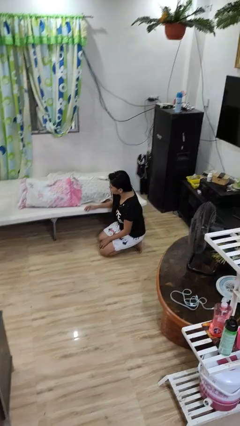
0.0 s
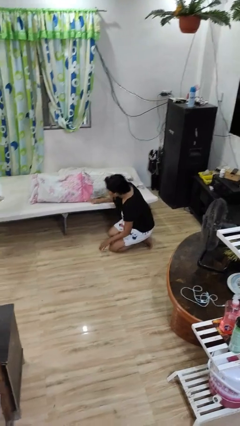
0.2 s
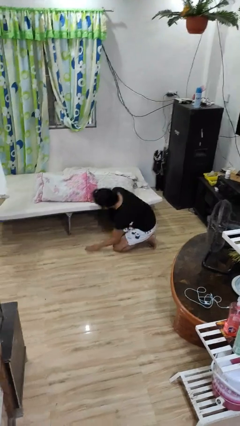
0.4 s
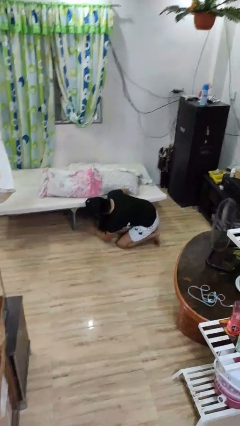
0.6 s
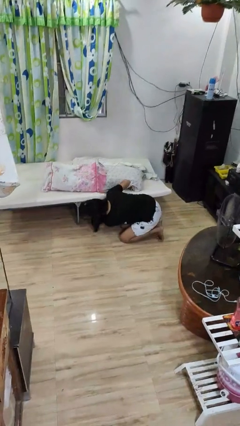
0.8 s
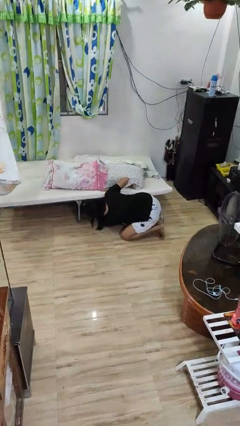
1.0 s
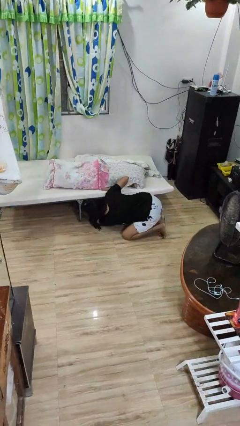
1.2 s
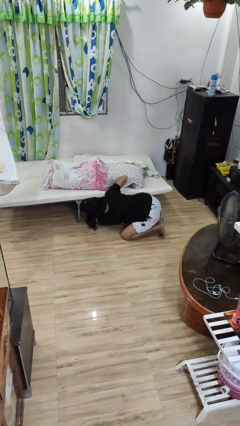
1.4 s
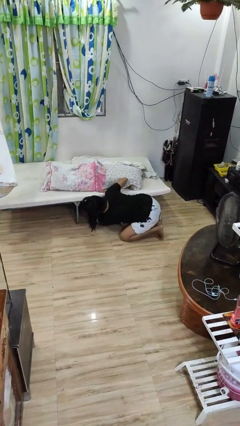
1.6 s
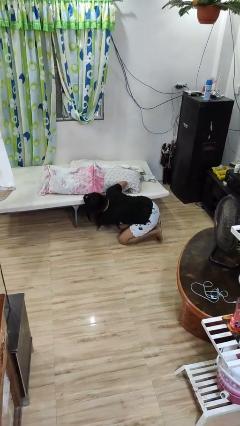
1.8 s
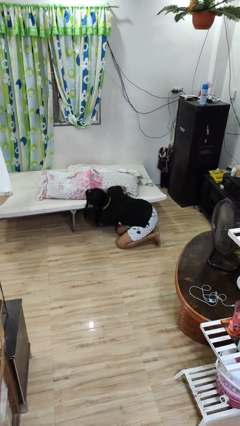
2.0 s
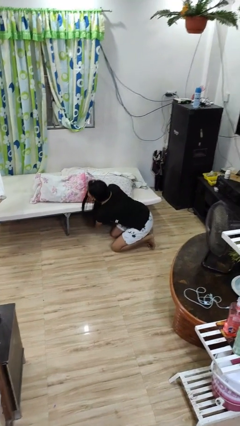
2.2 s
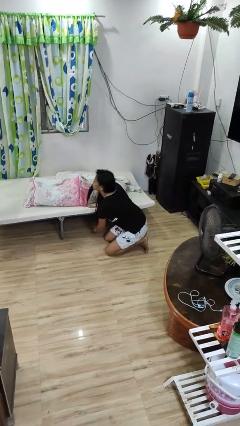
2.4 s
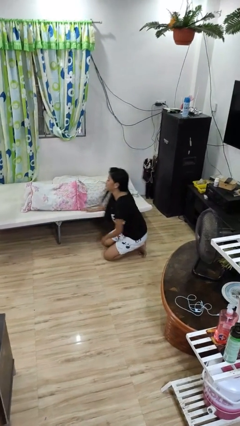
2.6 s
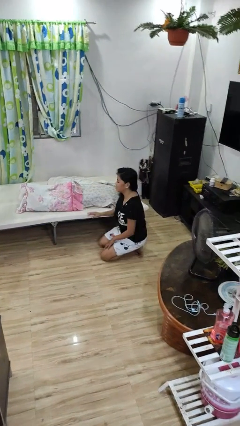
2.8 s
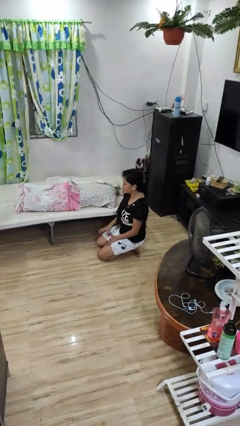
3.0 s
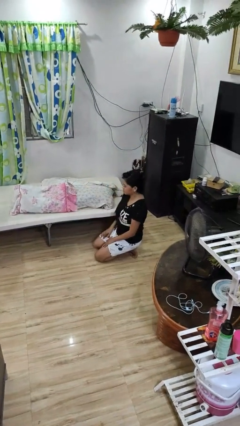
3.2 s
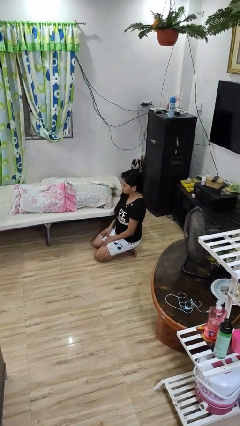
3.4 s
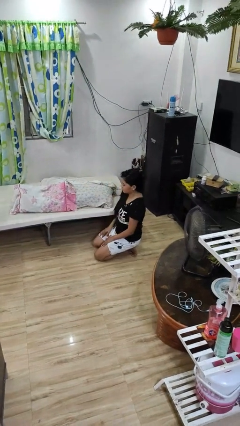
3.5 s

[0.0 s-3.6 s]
person searches under bed

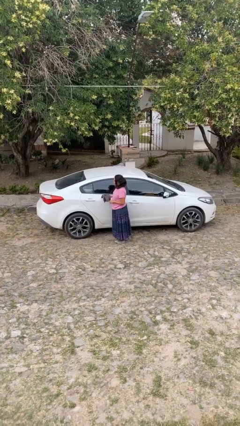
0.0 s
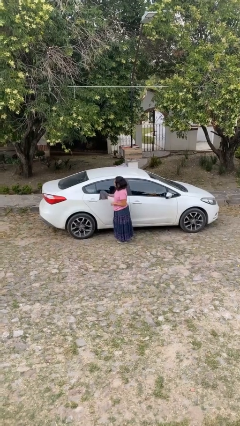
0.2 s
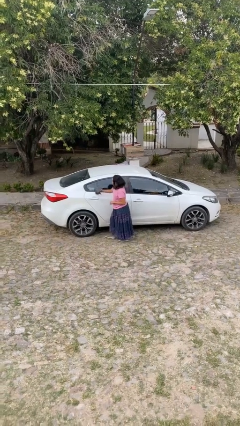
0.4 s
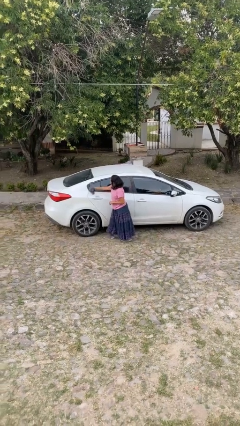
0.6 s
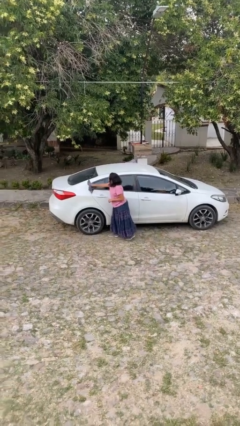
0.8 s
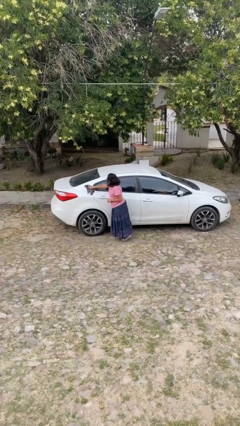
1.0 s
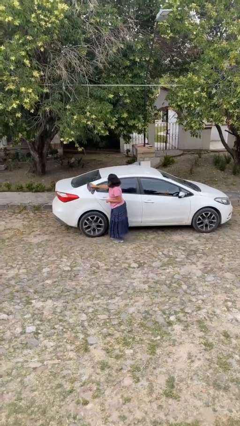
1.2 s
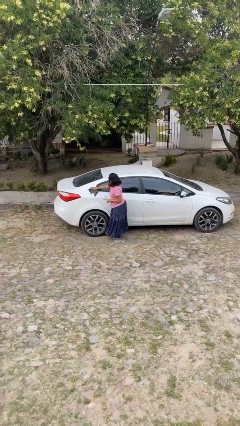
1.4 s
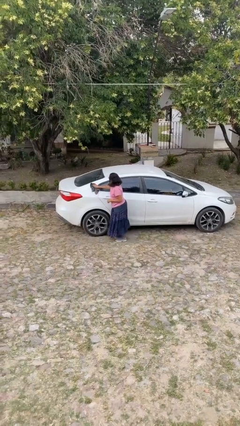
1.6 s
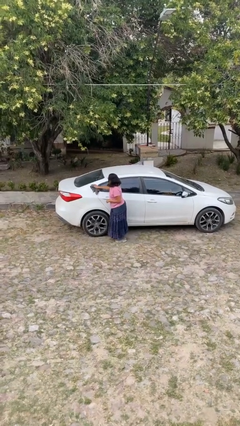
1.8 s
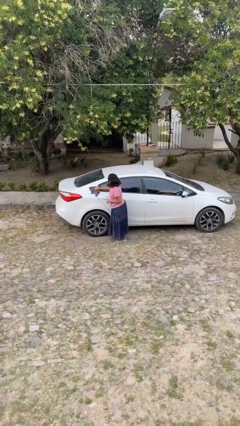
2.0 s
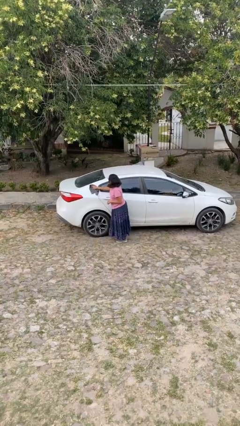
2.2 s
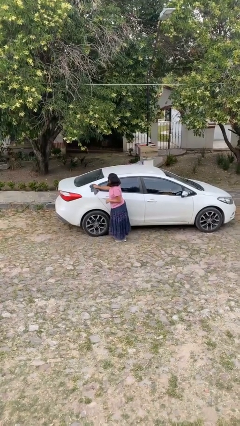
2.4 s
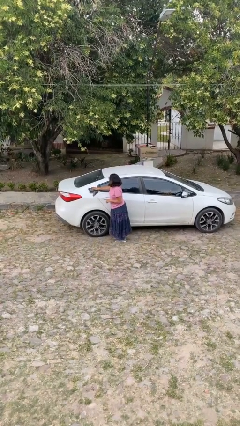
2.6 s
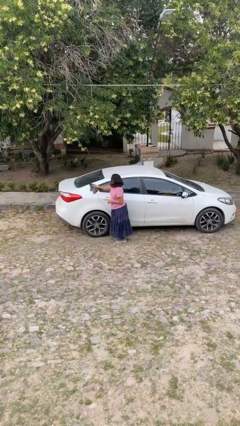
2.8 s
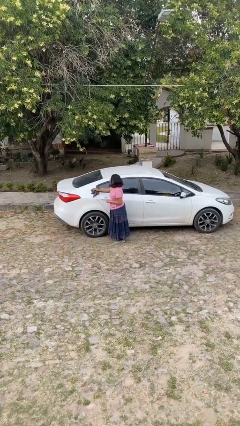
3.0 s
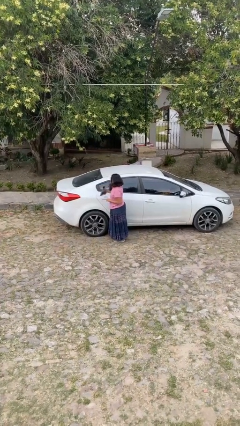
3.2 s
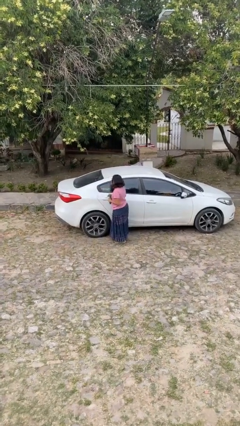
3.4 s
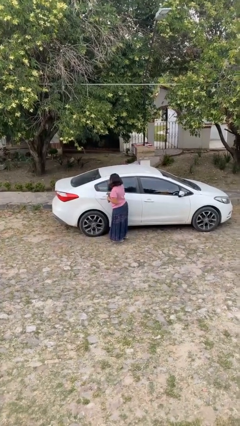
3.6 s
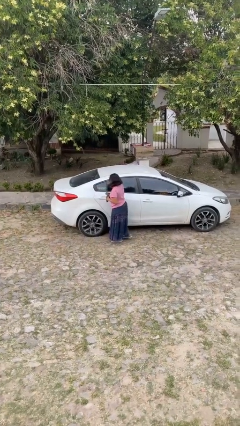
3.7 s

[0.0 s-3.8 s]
person polishes car with rag

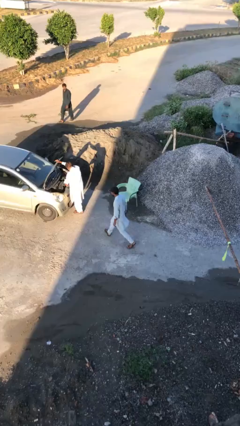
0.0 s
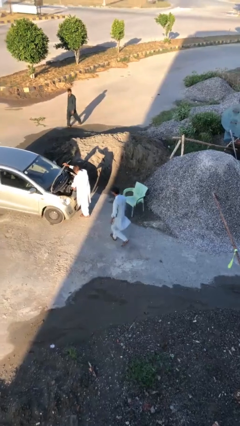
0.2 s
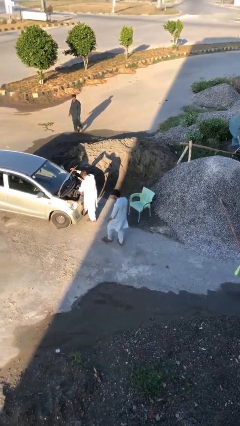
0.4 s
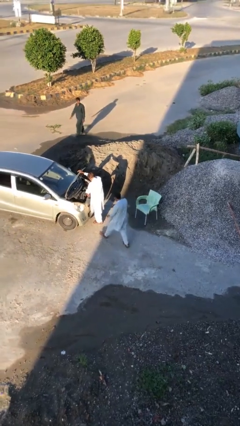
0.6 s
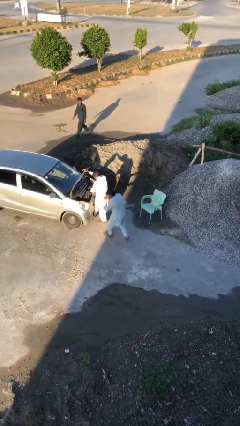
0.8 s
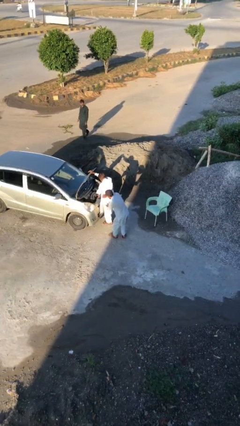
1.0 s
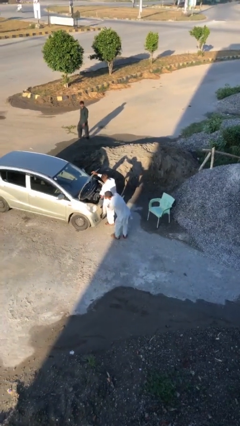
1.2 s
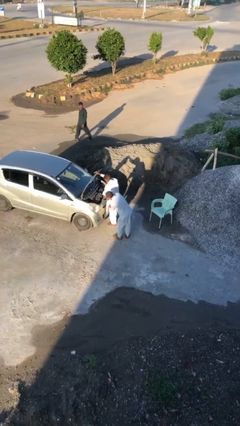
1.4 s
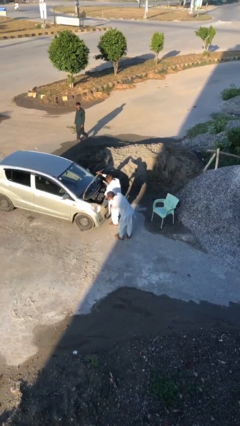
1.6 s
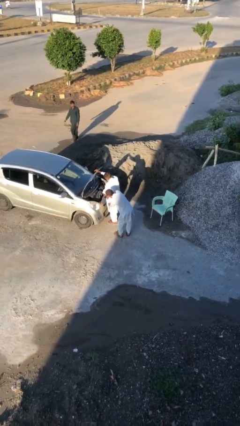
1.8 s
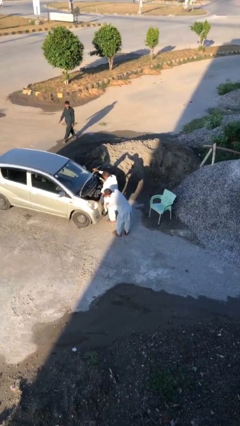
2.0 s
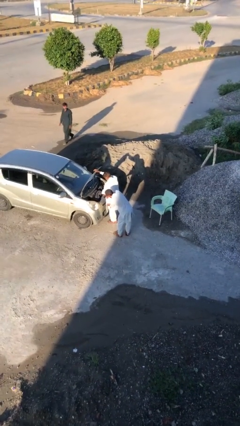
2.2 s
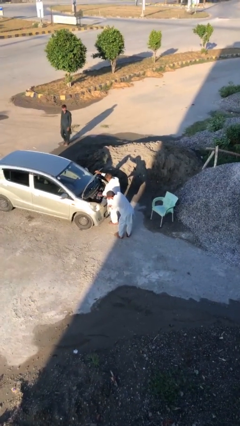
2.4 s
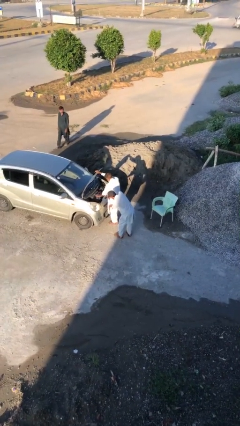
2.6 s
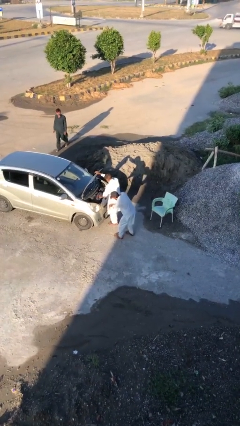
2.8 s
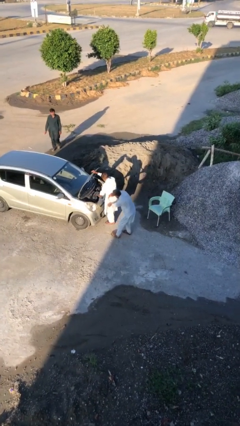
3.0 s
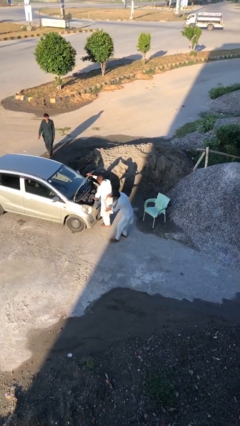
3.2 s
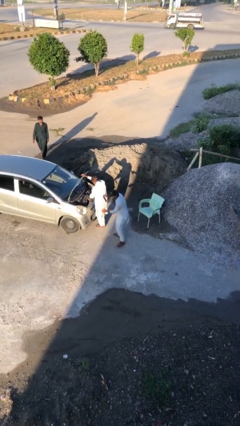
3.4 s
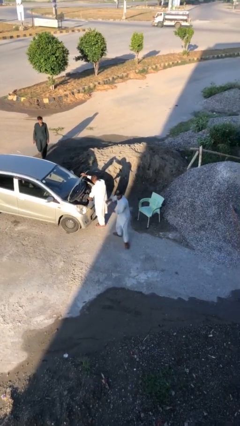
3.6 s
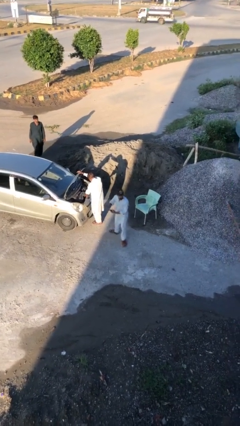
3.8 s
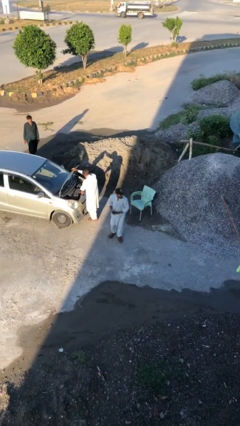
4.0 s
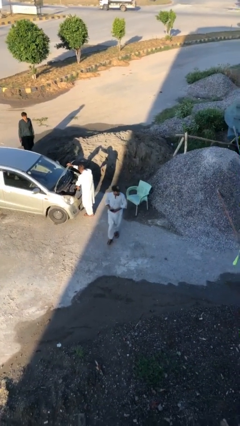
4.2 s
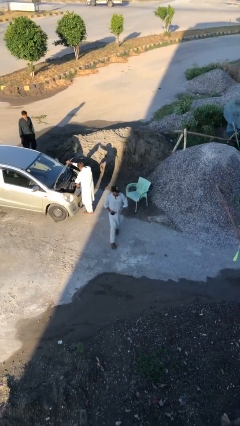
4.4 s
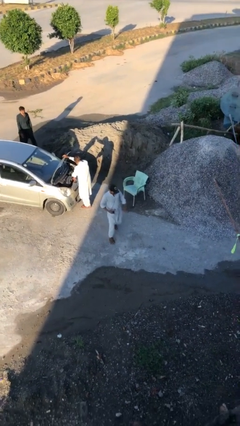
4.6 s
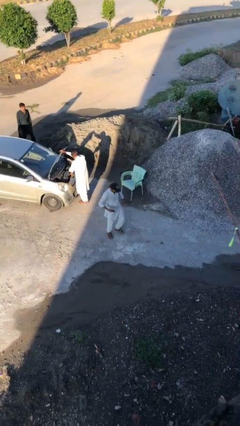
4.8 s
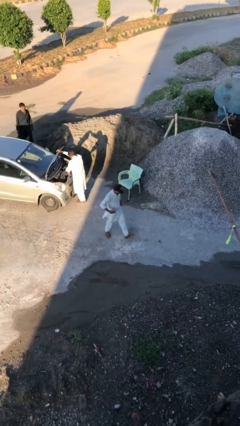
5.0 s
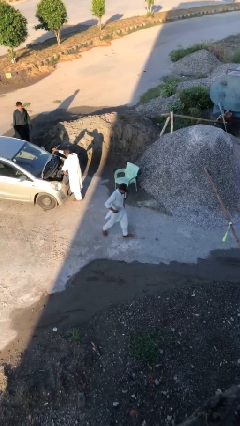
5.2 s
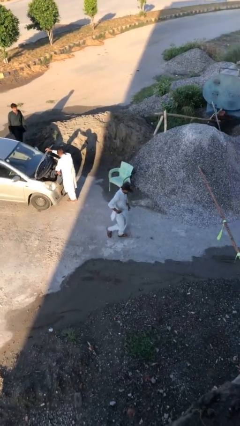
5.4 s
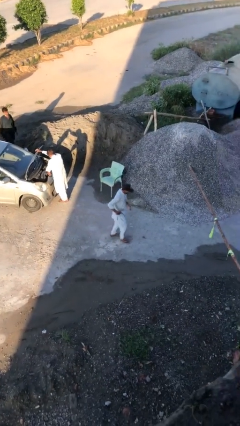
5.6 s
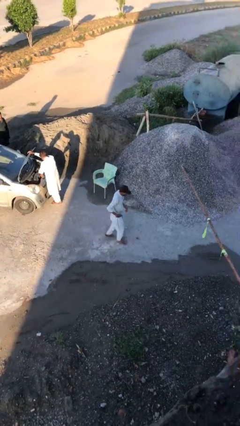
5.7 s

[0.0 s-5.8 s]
person steals object from person

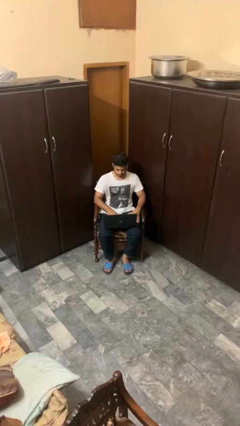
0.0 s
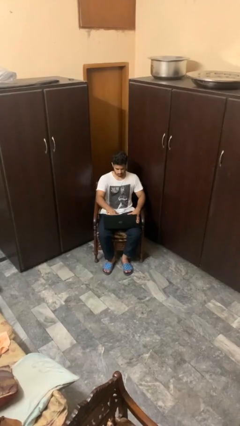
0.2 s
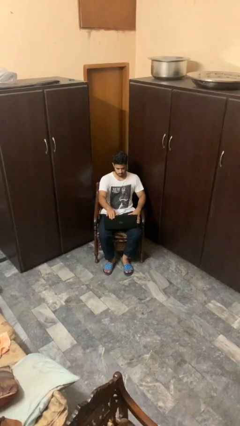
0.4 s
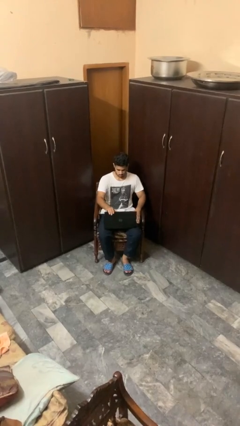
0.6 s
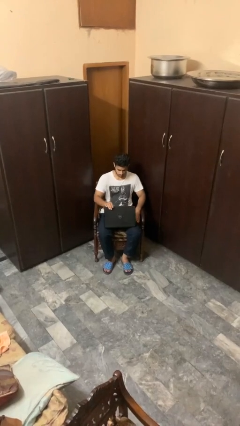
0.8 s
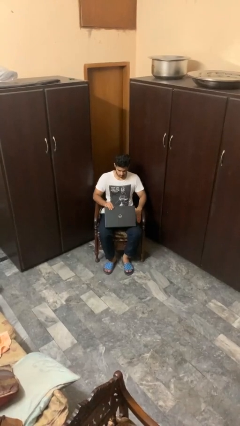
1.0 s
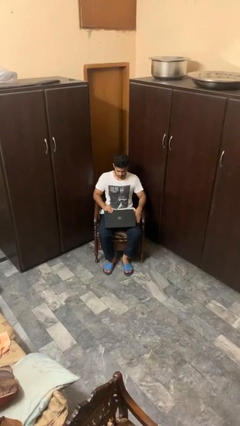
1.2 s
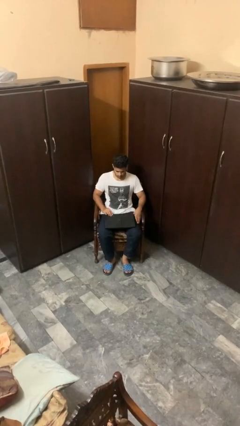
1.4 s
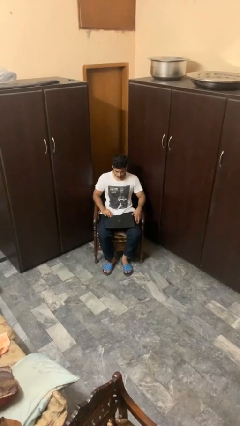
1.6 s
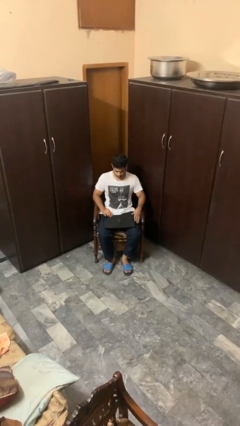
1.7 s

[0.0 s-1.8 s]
person closes laptop

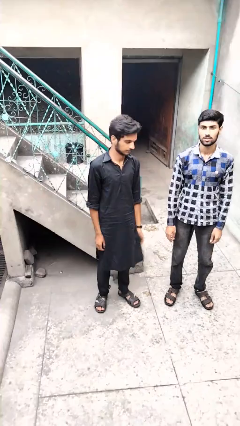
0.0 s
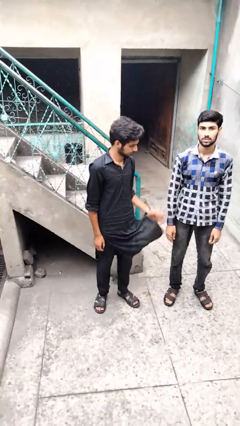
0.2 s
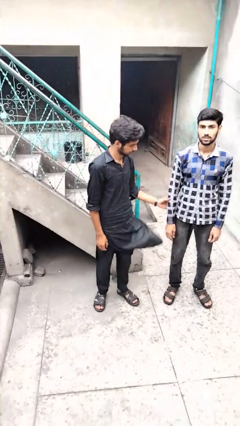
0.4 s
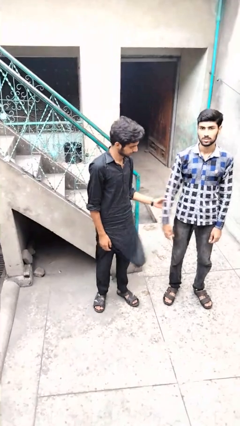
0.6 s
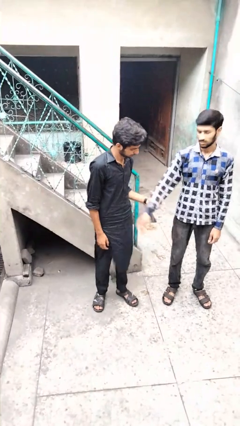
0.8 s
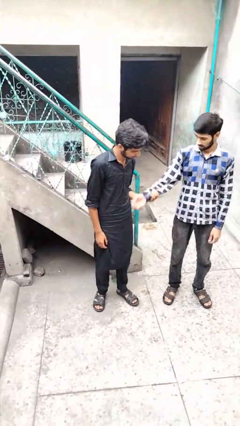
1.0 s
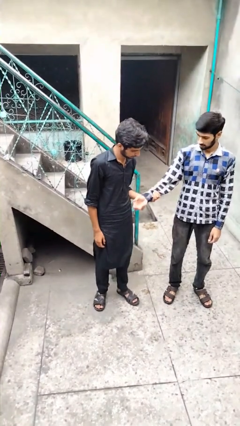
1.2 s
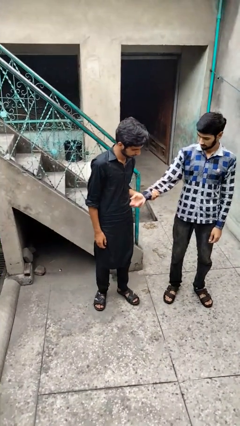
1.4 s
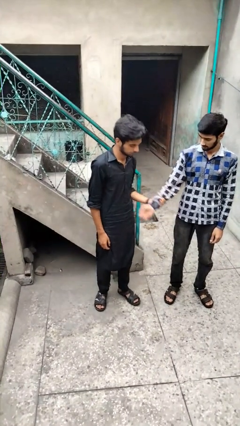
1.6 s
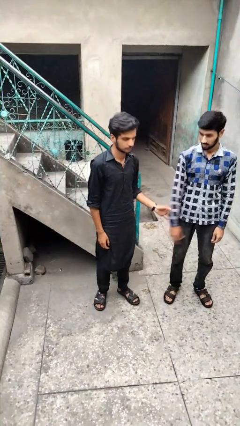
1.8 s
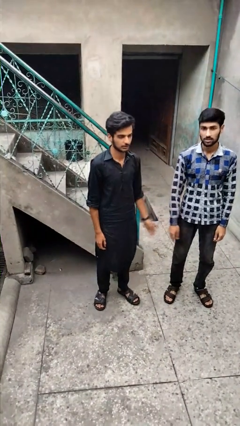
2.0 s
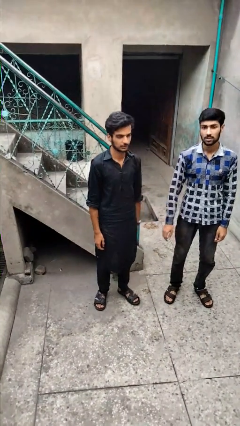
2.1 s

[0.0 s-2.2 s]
person grabs person by forearm

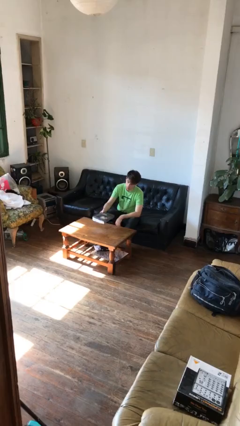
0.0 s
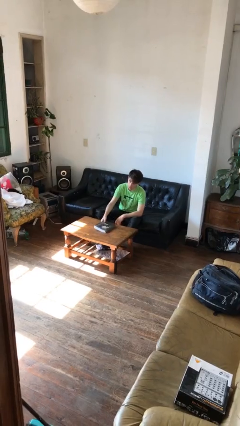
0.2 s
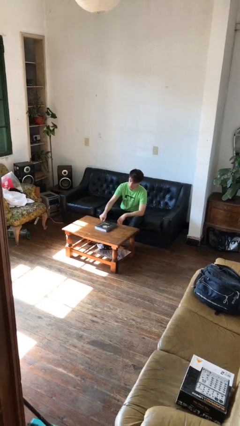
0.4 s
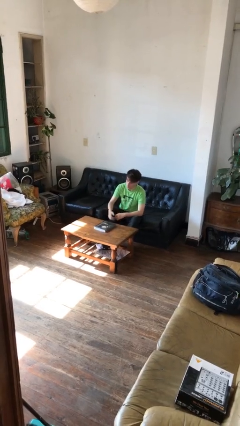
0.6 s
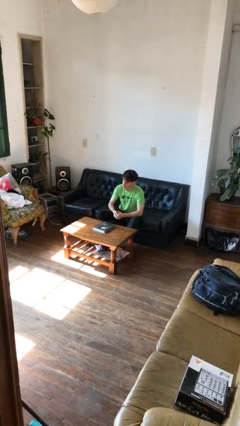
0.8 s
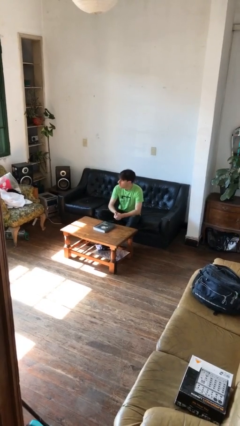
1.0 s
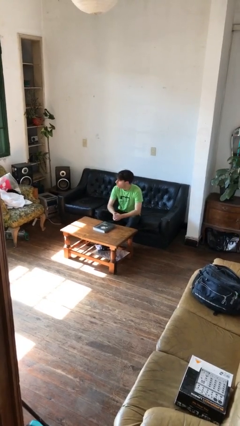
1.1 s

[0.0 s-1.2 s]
person puts down object on table
